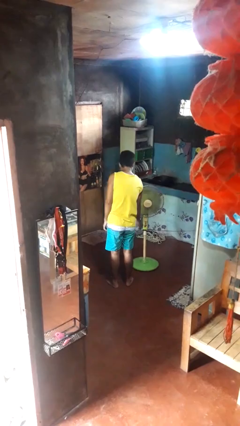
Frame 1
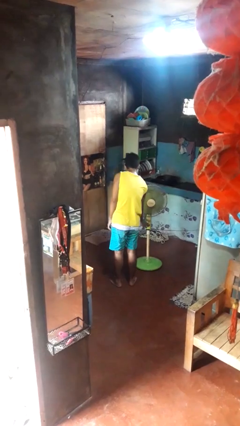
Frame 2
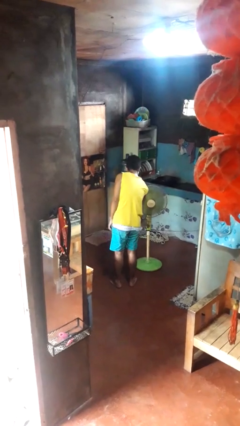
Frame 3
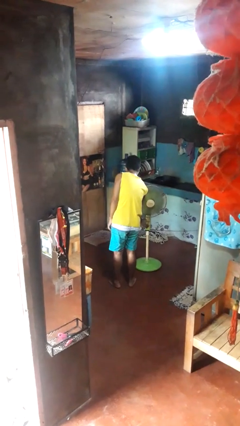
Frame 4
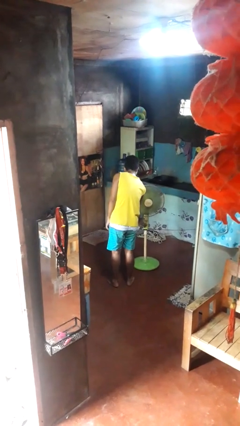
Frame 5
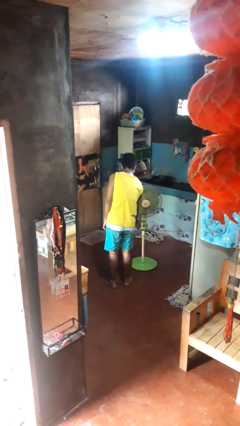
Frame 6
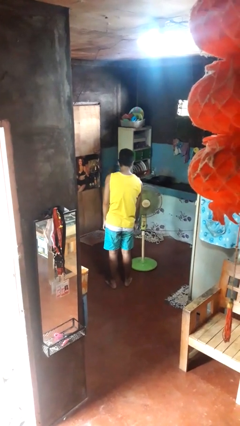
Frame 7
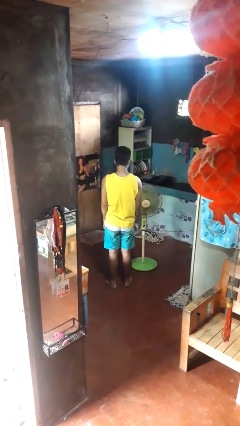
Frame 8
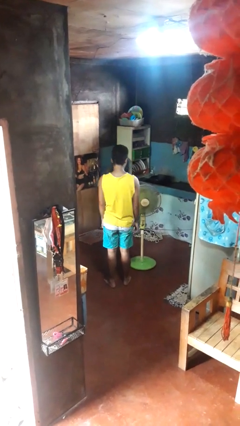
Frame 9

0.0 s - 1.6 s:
person turns off fan

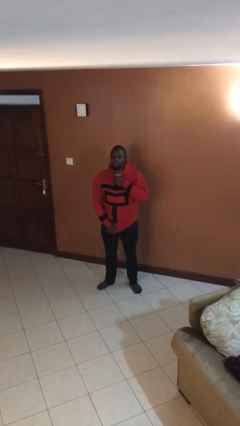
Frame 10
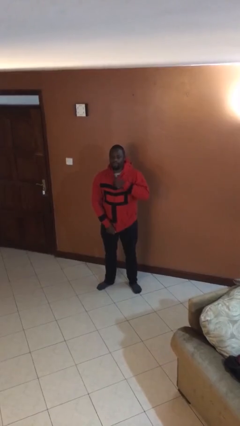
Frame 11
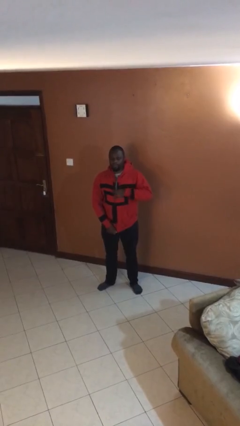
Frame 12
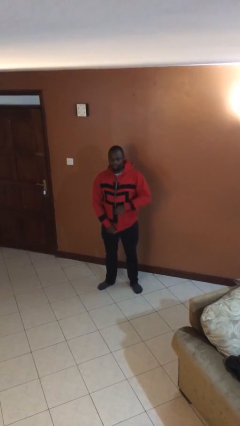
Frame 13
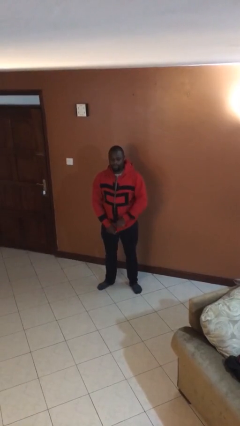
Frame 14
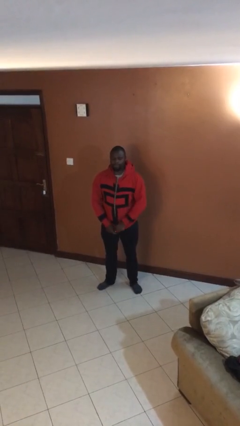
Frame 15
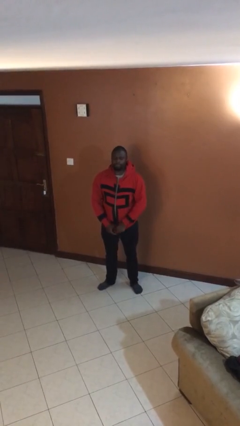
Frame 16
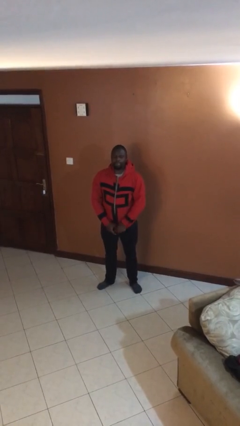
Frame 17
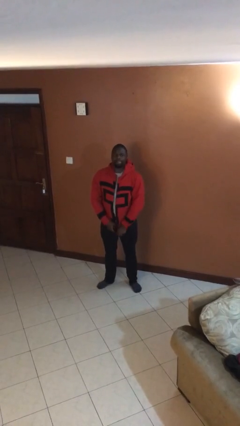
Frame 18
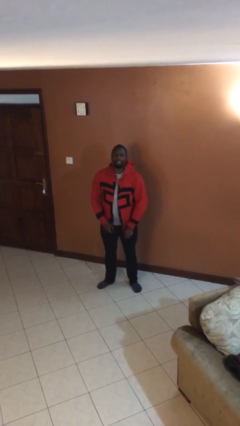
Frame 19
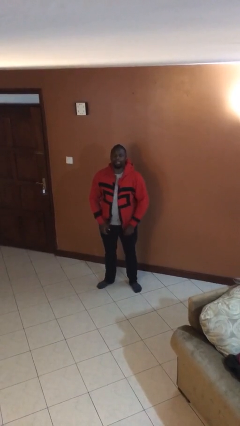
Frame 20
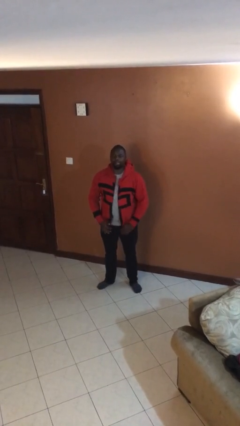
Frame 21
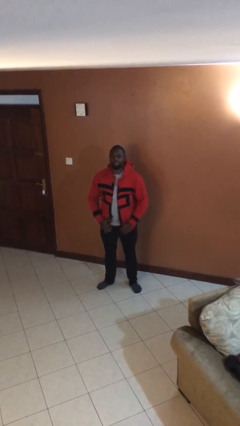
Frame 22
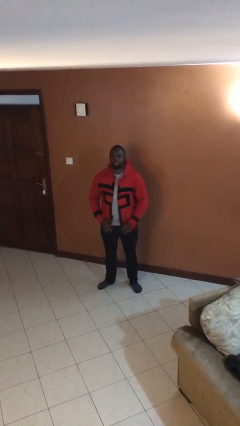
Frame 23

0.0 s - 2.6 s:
person unzips jacket

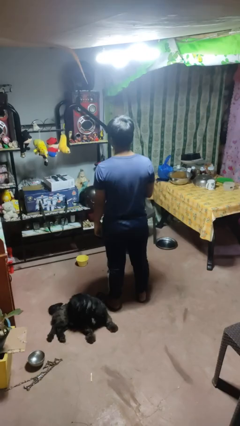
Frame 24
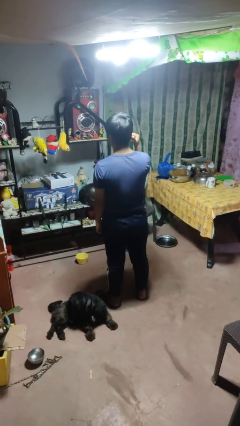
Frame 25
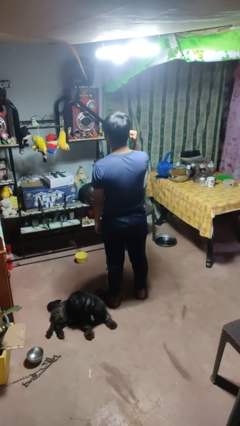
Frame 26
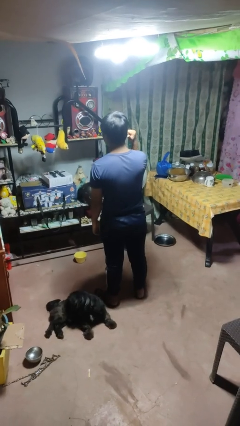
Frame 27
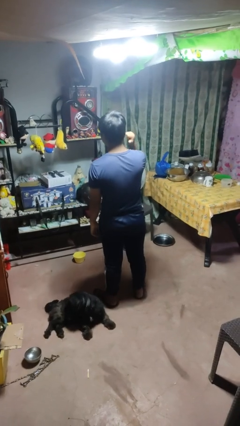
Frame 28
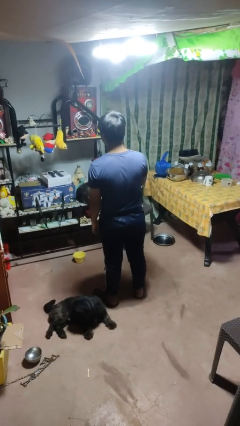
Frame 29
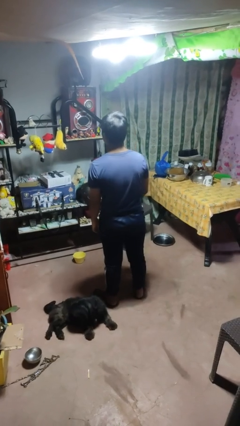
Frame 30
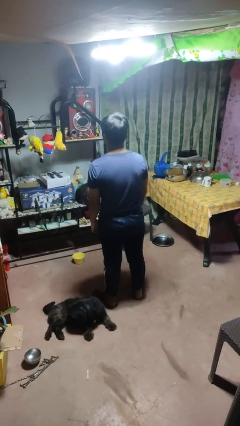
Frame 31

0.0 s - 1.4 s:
person gestures behind me

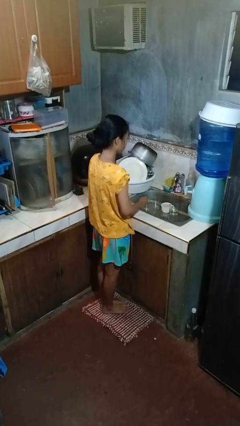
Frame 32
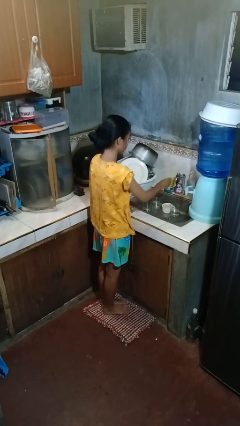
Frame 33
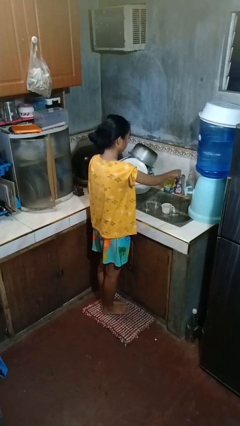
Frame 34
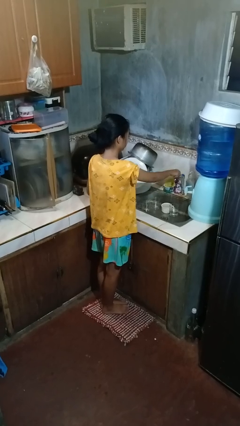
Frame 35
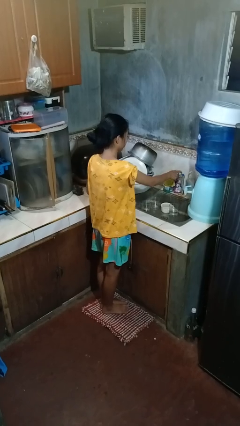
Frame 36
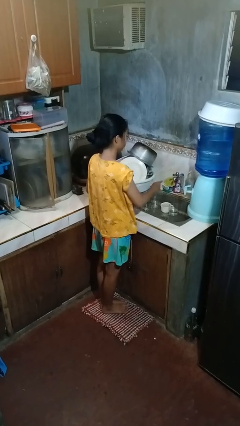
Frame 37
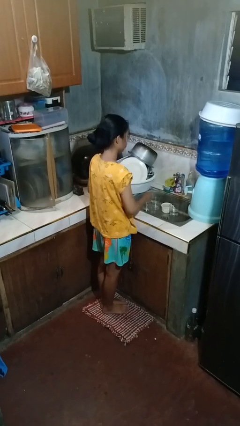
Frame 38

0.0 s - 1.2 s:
person turns off faucet

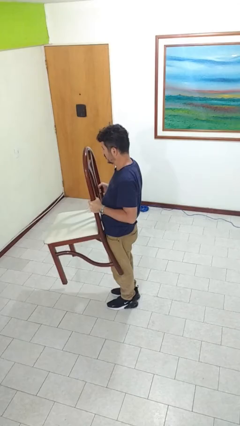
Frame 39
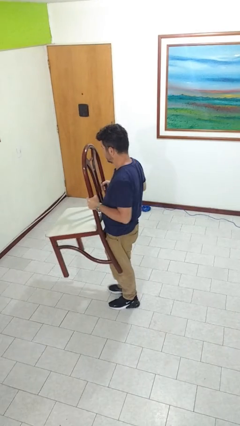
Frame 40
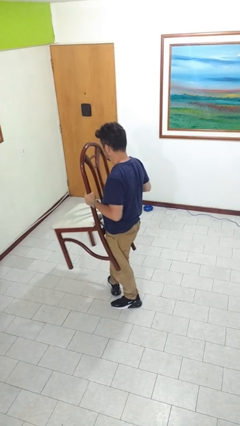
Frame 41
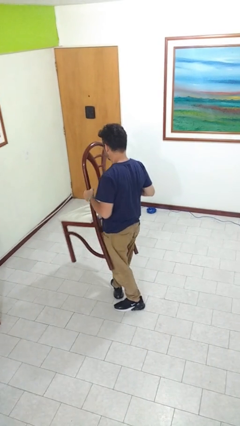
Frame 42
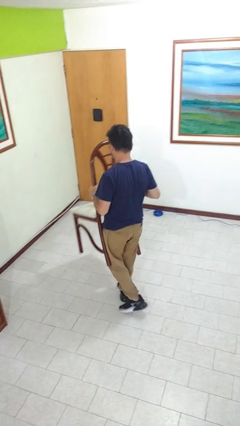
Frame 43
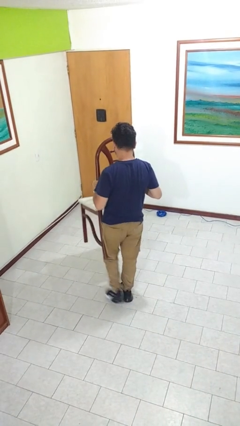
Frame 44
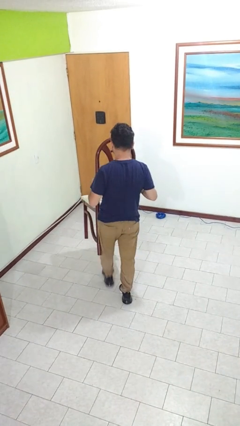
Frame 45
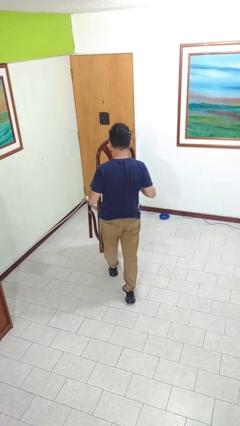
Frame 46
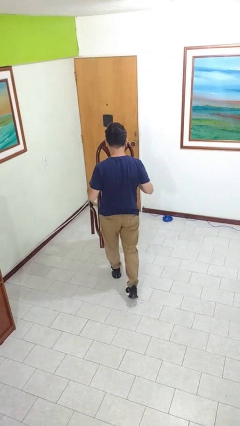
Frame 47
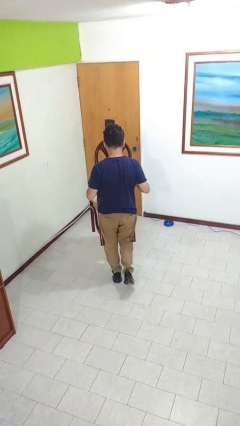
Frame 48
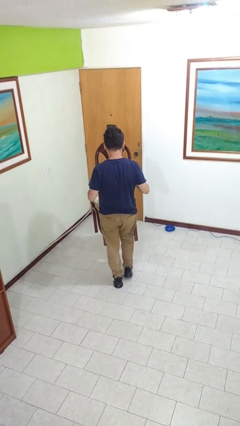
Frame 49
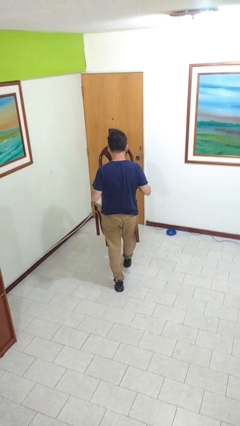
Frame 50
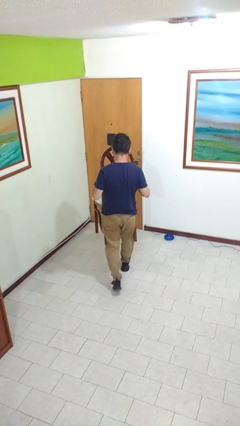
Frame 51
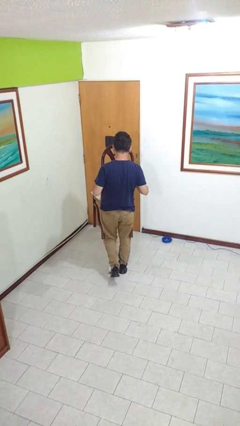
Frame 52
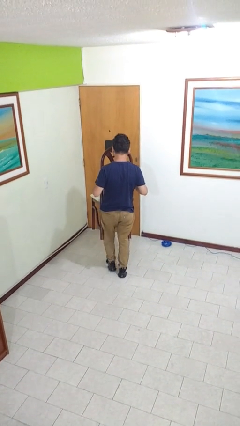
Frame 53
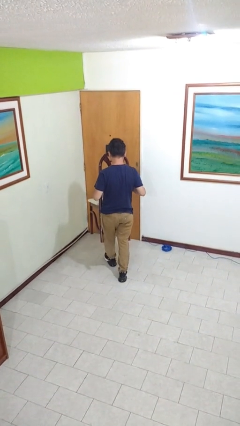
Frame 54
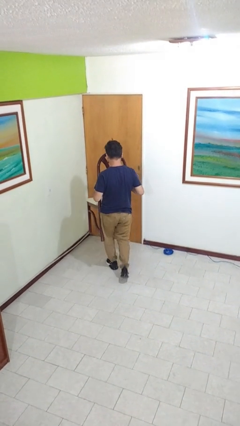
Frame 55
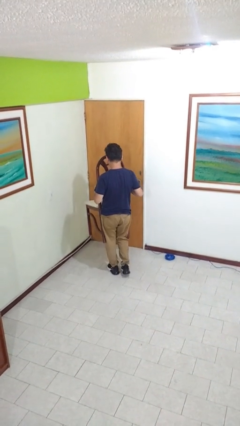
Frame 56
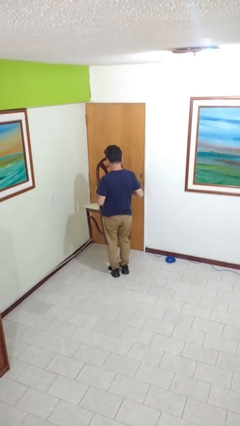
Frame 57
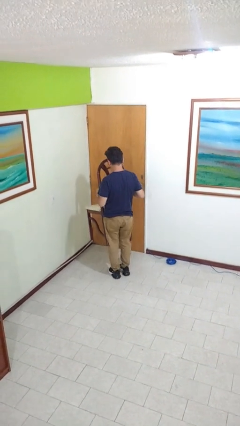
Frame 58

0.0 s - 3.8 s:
person carries furniture

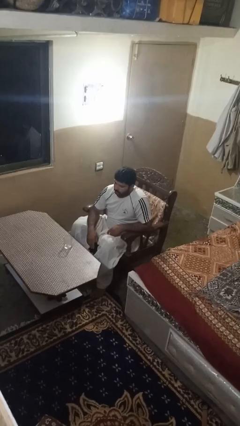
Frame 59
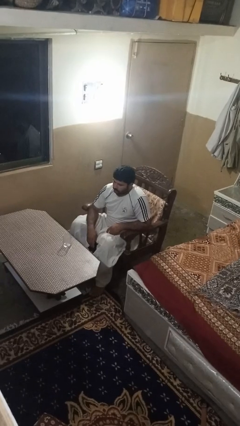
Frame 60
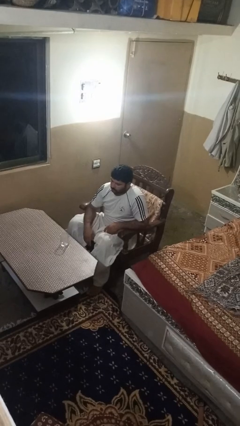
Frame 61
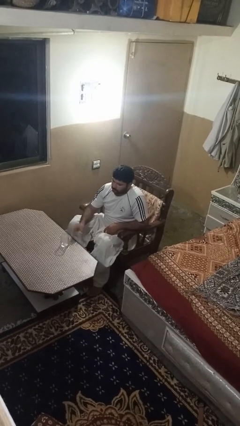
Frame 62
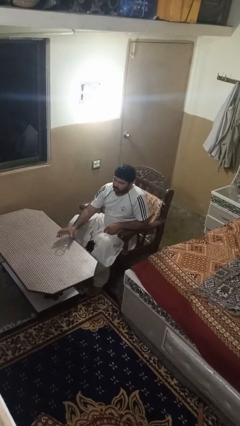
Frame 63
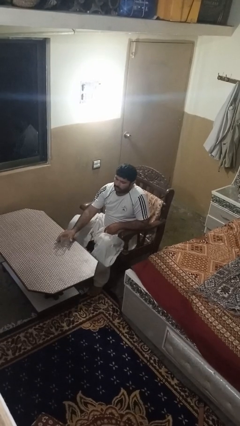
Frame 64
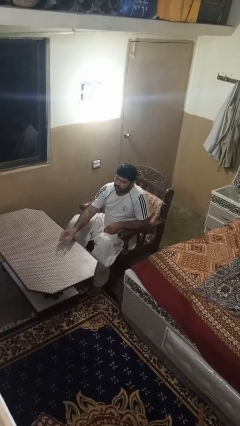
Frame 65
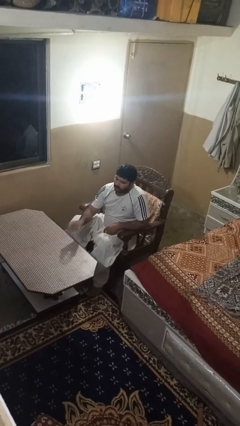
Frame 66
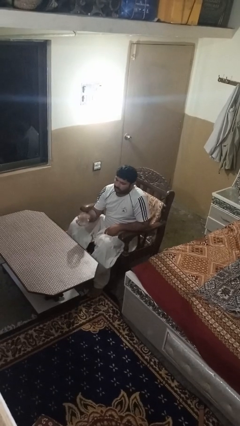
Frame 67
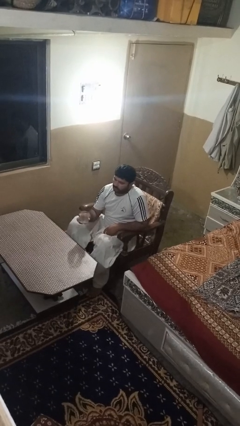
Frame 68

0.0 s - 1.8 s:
person picks up object from table

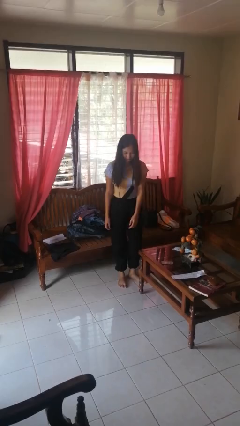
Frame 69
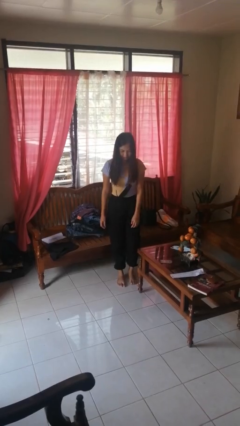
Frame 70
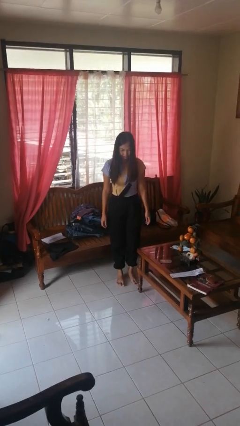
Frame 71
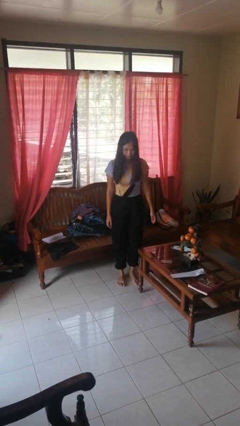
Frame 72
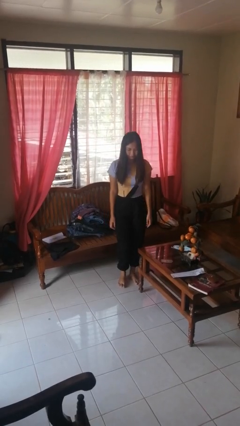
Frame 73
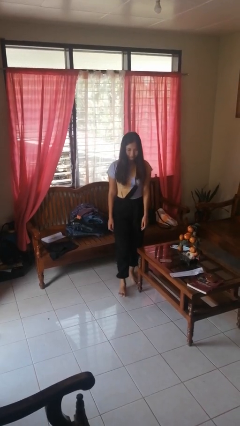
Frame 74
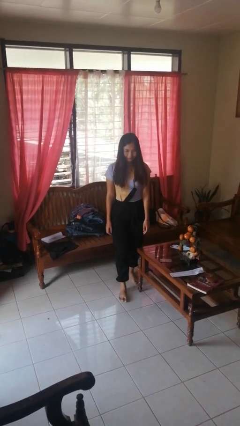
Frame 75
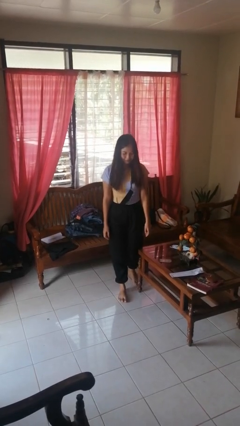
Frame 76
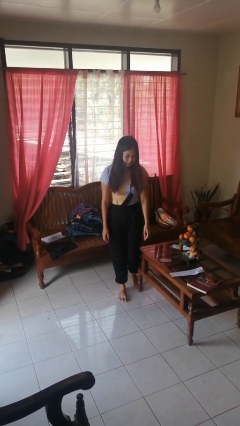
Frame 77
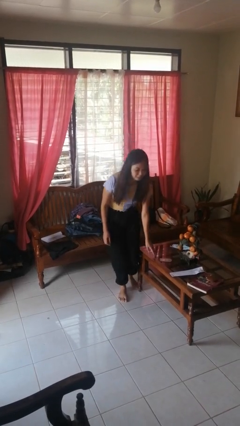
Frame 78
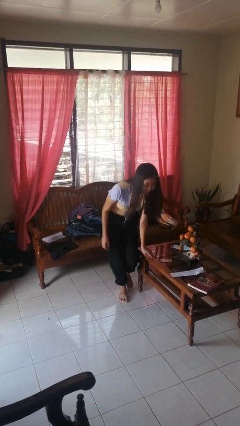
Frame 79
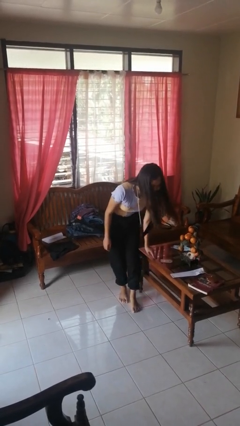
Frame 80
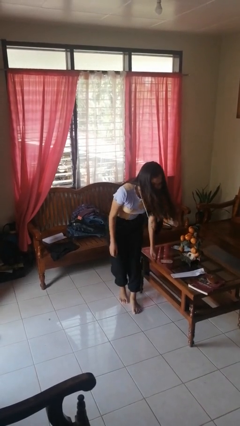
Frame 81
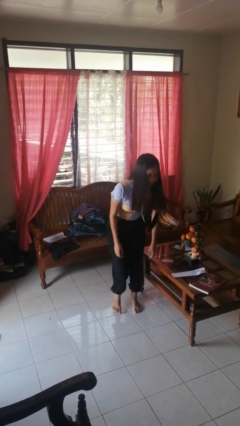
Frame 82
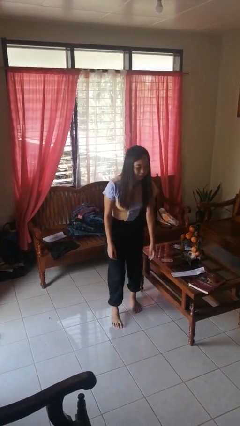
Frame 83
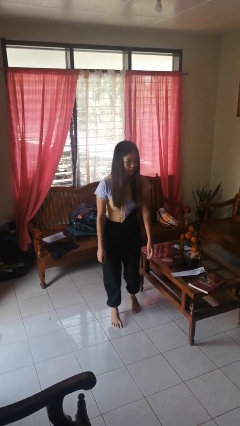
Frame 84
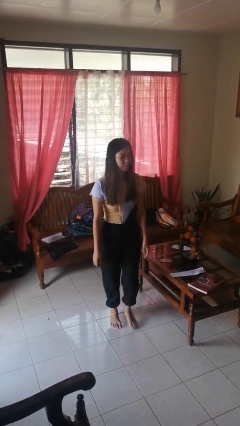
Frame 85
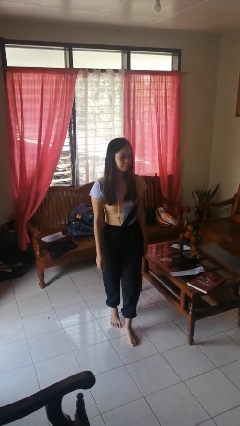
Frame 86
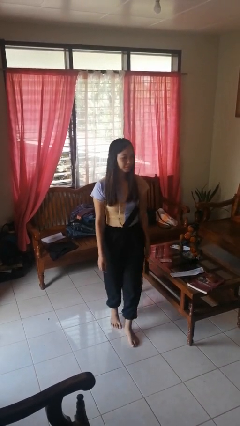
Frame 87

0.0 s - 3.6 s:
person bumps into table

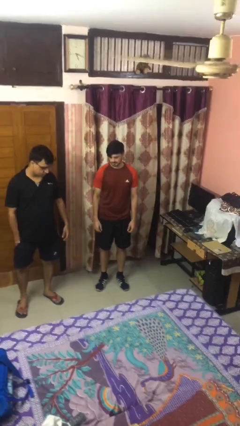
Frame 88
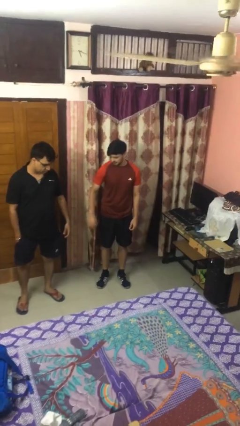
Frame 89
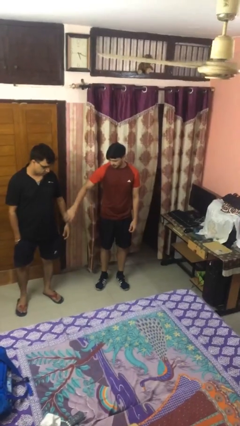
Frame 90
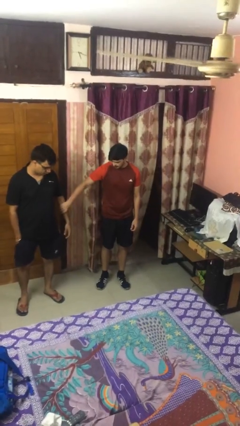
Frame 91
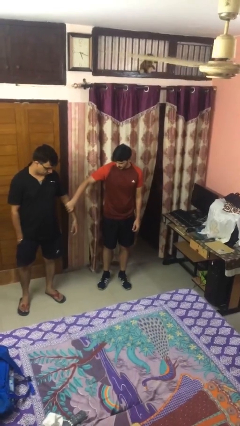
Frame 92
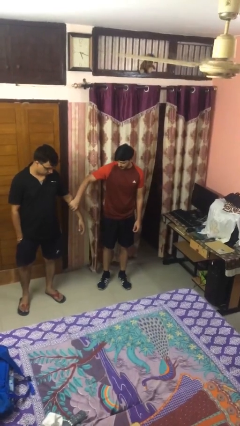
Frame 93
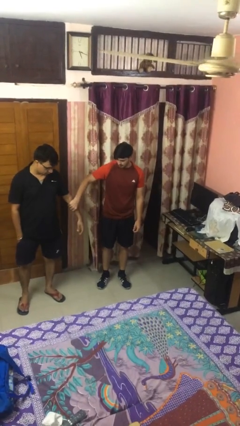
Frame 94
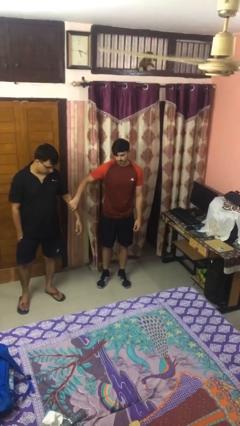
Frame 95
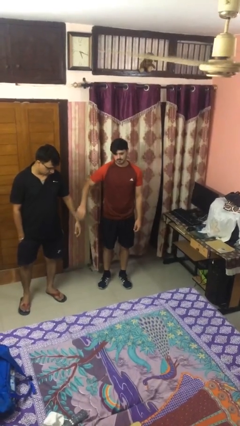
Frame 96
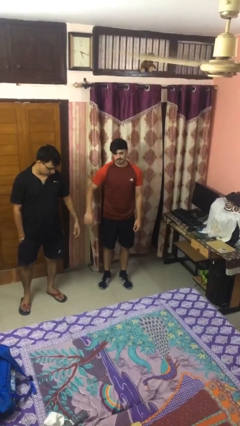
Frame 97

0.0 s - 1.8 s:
person grabs person by forearm
